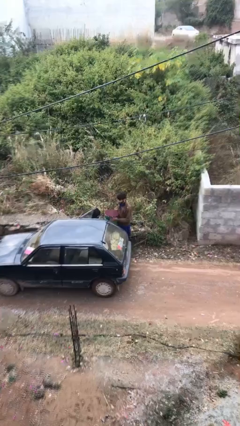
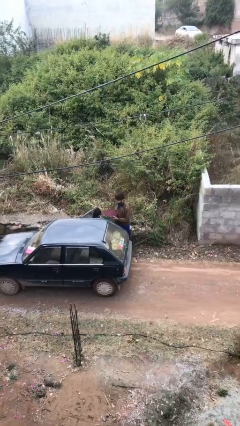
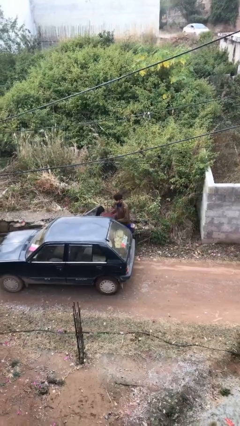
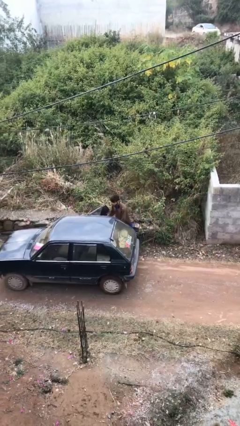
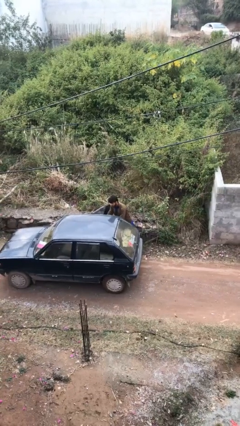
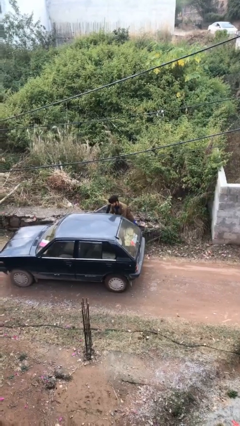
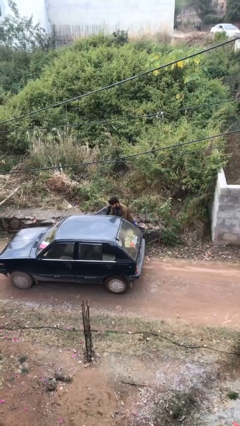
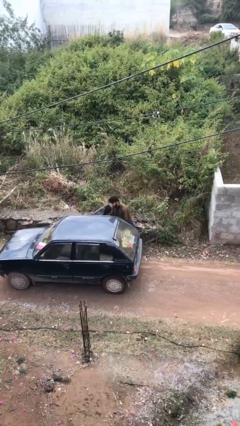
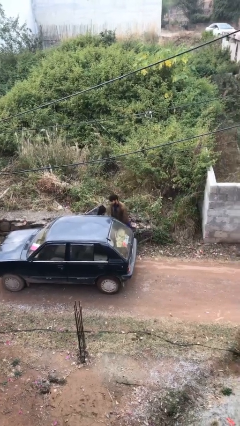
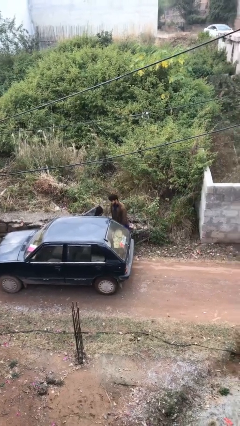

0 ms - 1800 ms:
person loads car

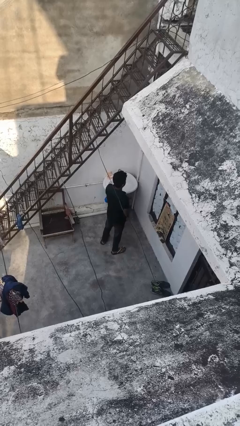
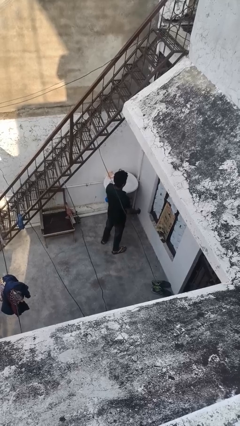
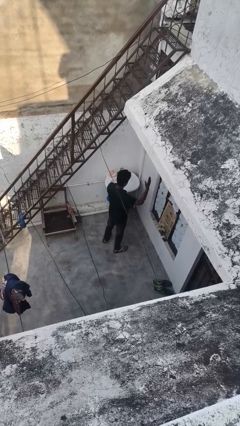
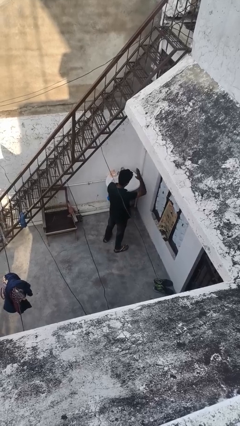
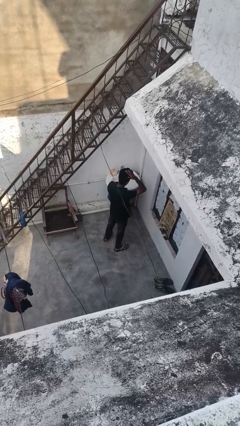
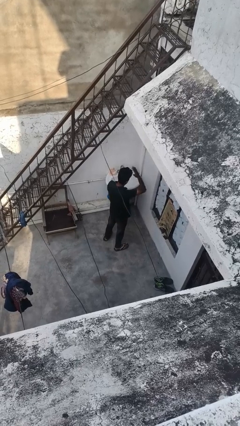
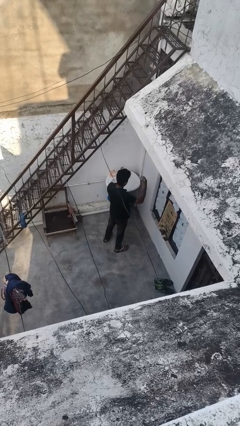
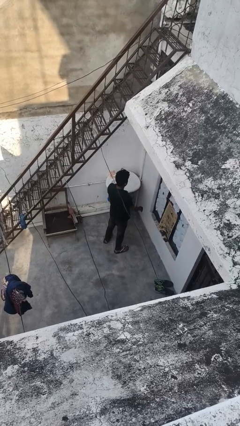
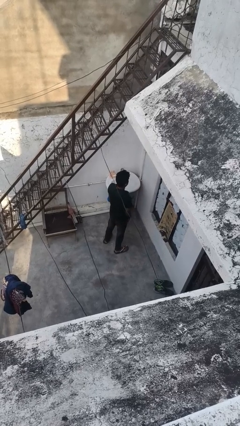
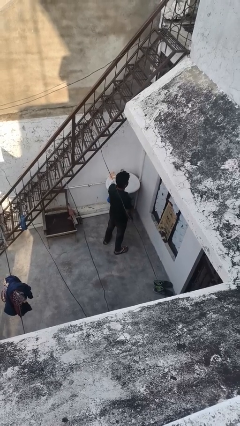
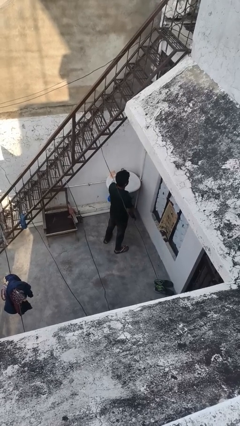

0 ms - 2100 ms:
person pats head

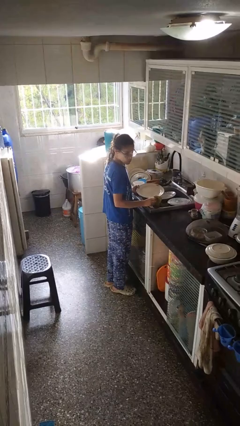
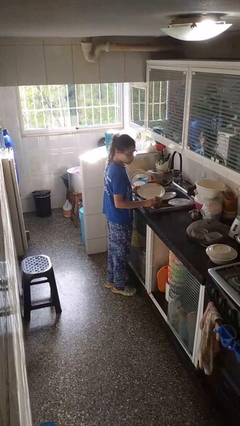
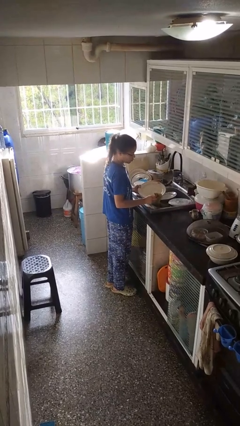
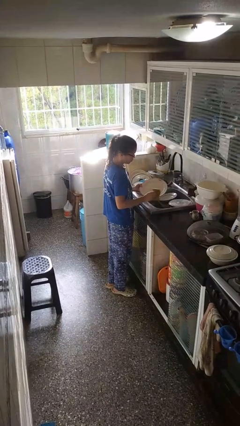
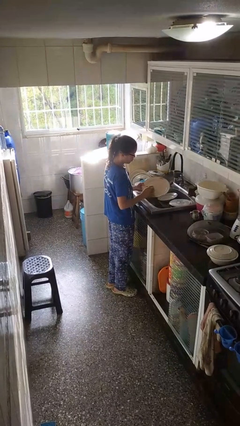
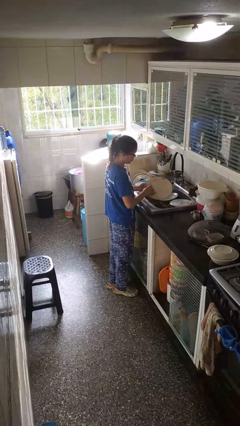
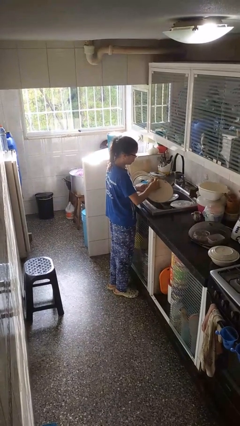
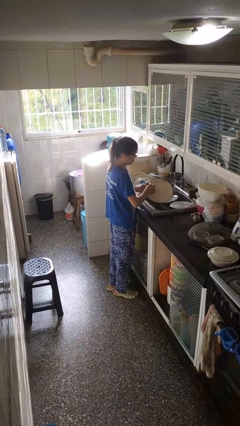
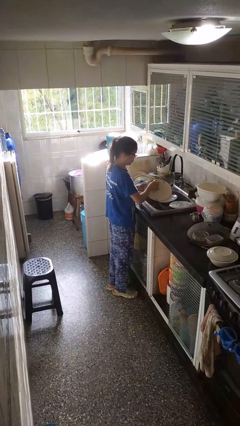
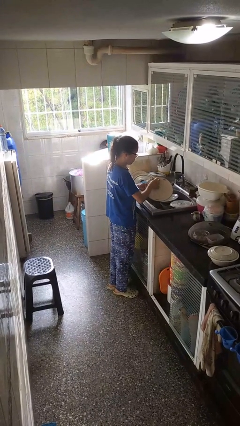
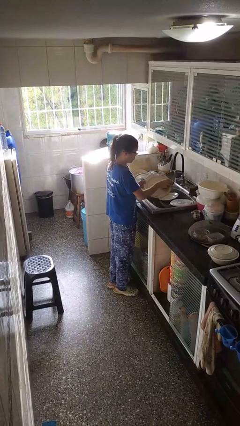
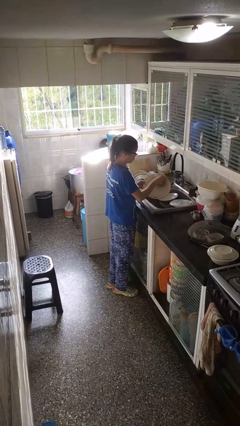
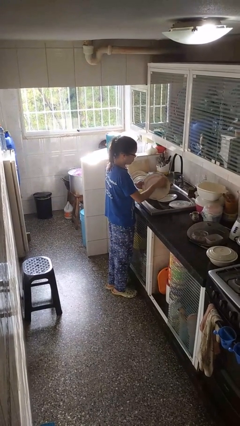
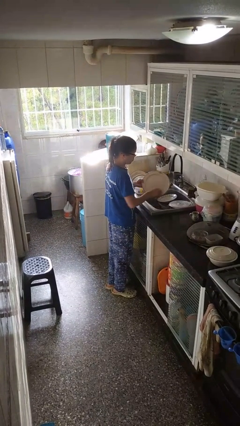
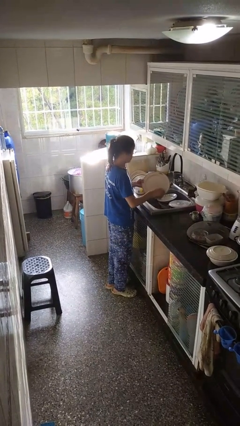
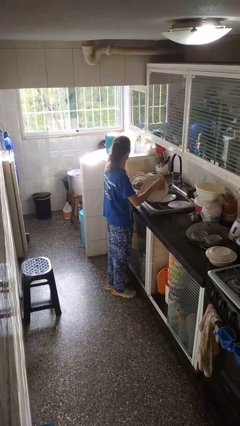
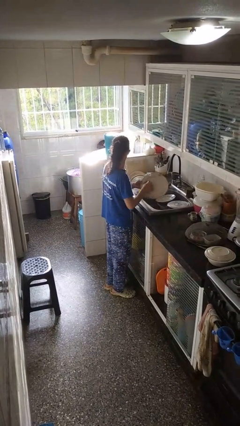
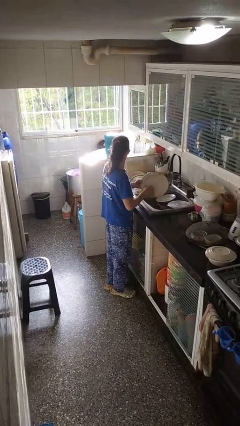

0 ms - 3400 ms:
person washes dish

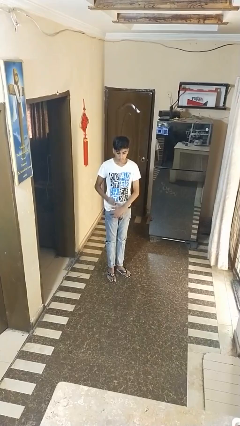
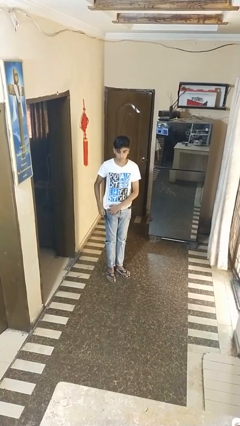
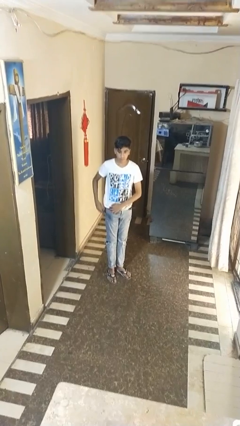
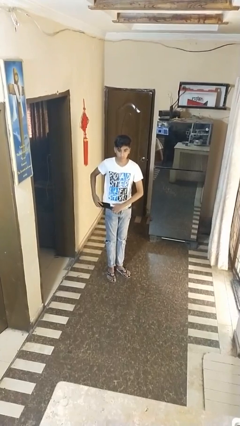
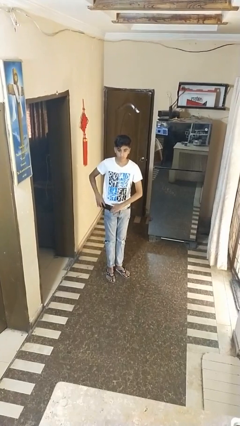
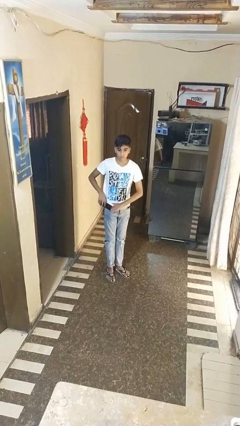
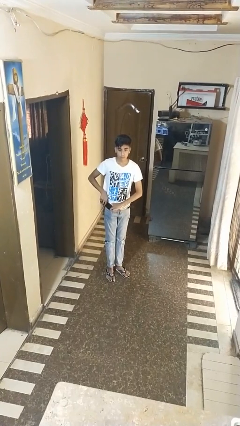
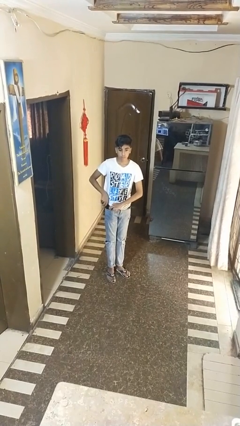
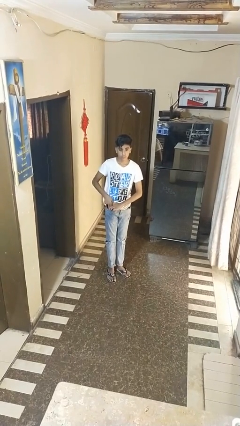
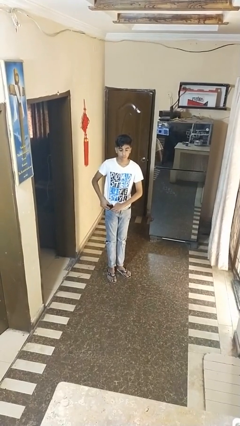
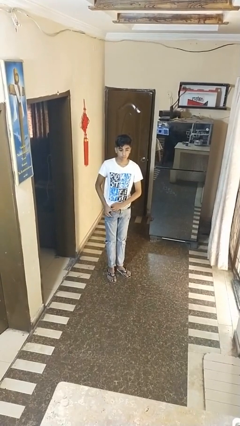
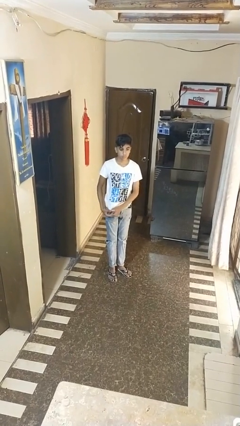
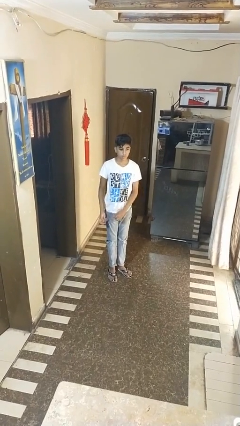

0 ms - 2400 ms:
person puts phone into pocket

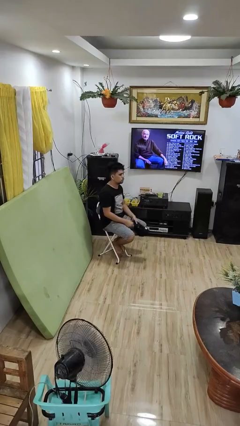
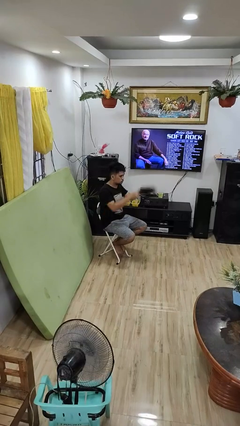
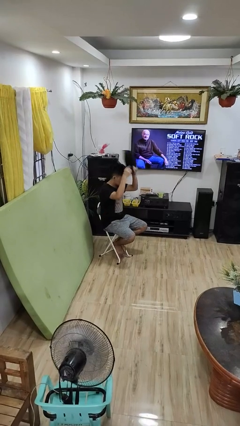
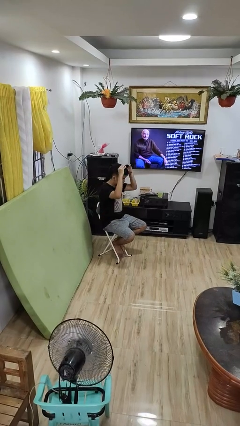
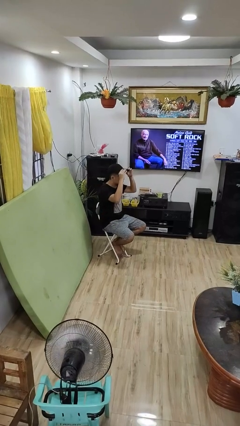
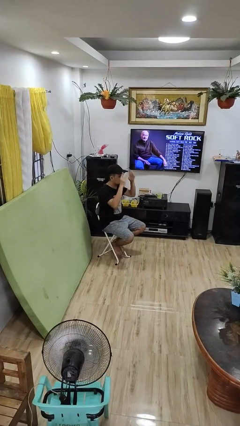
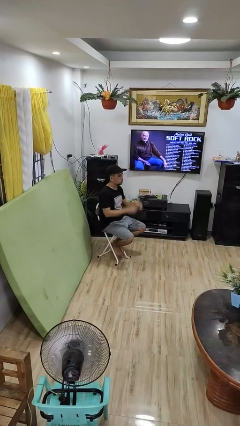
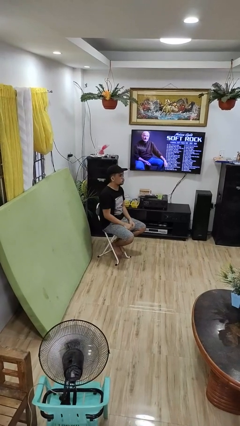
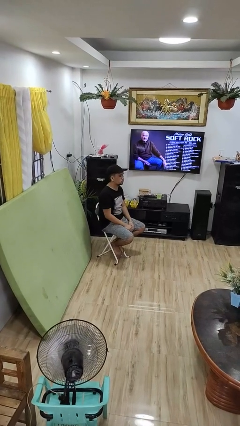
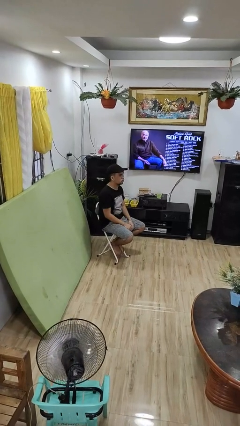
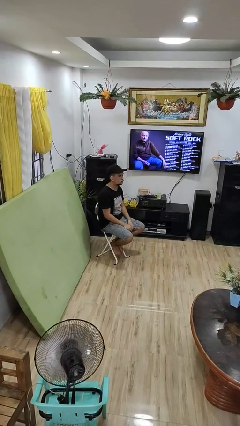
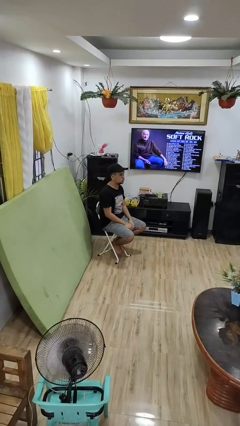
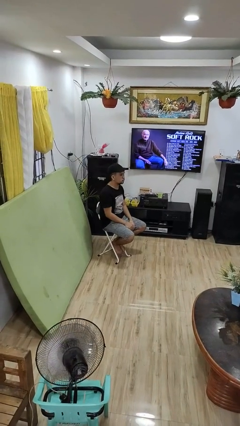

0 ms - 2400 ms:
person puts on hat

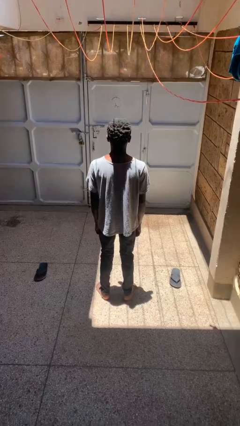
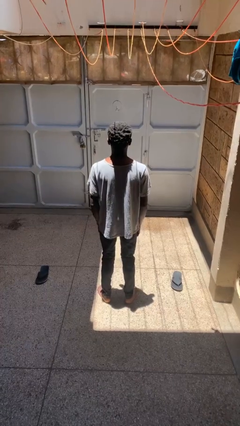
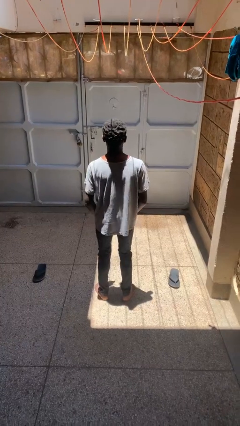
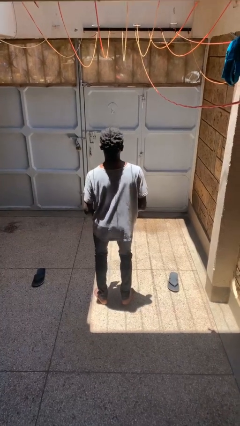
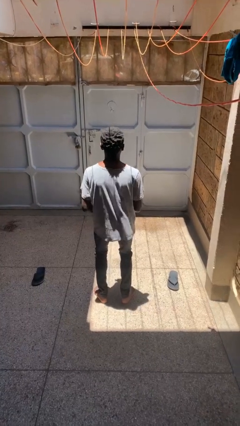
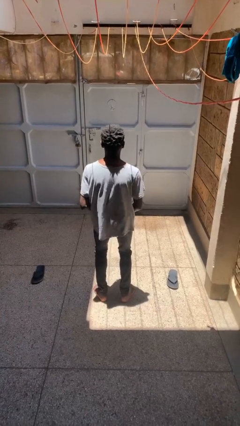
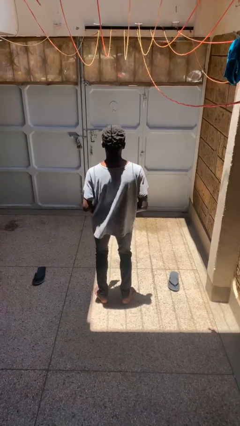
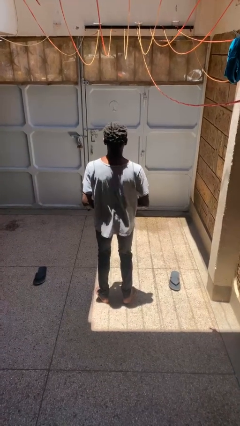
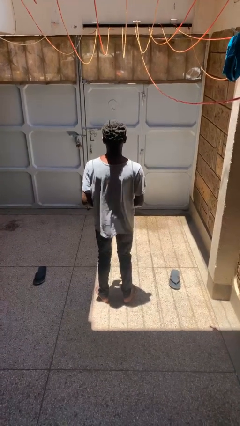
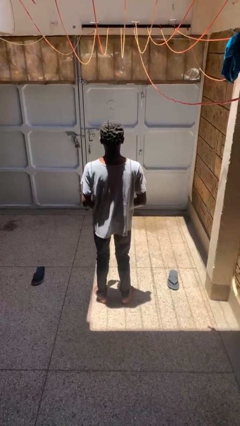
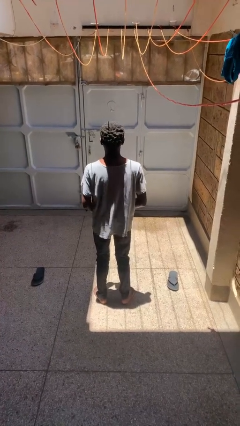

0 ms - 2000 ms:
person dances in place

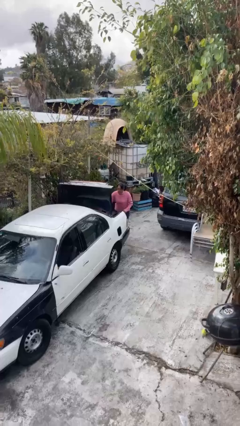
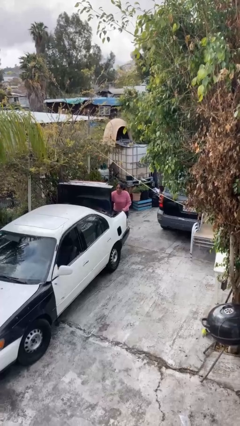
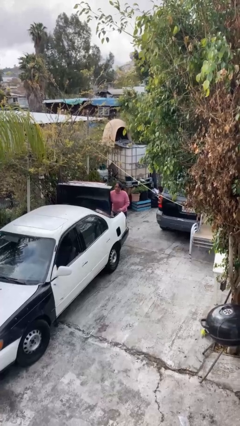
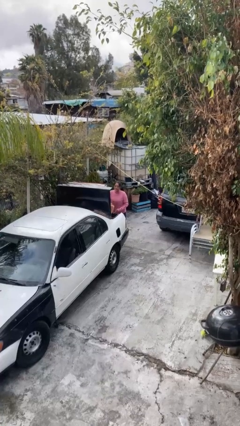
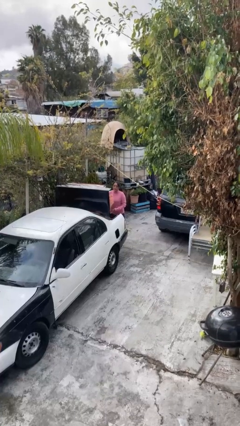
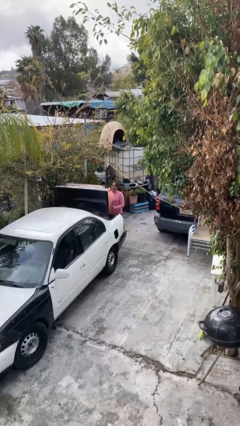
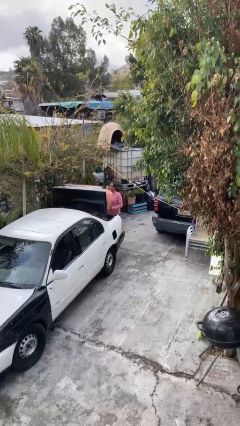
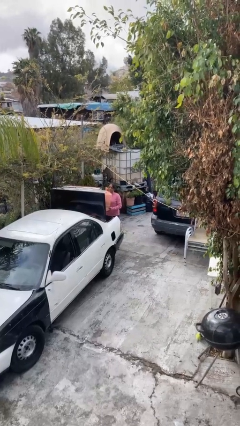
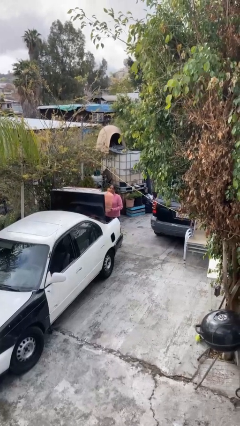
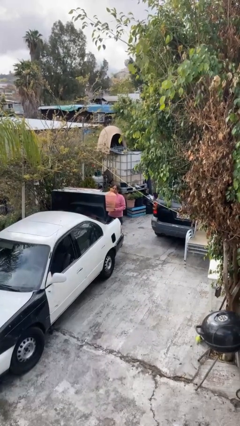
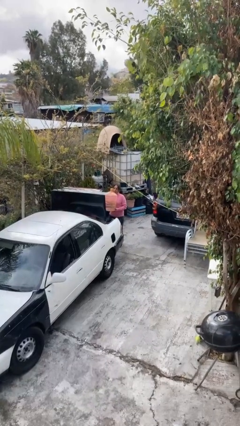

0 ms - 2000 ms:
person unloads car

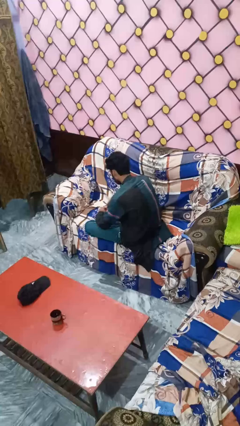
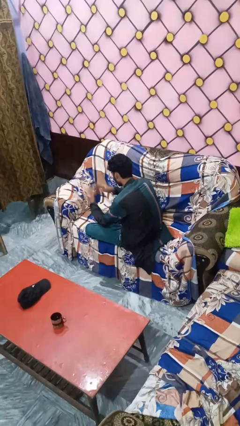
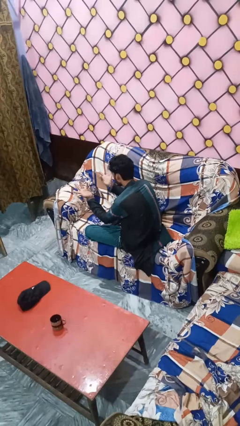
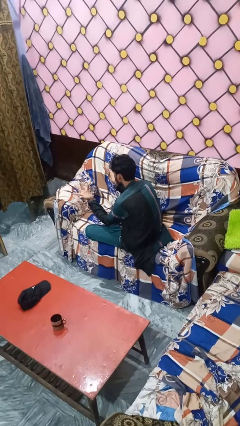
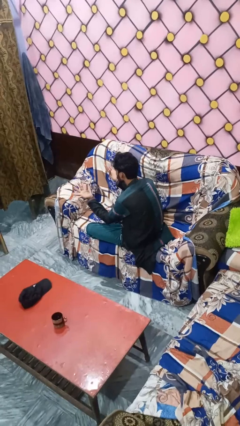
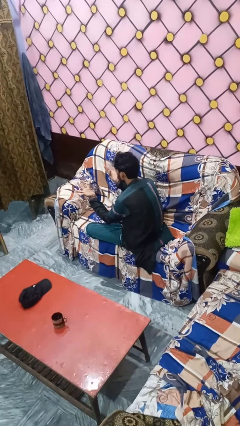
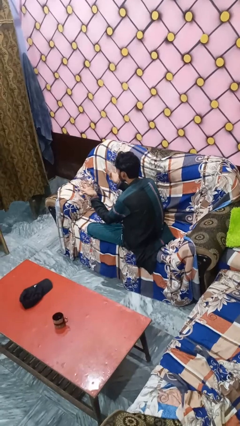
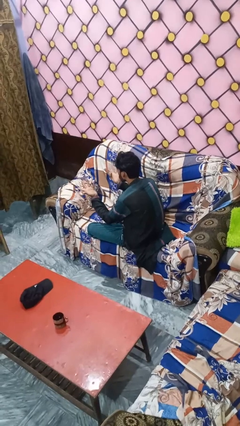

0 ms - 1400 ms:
person holds object above head
